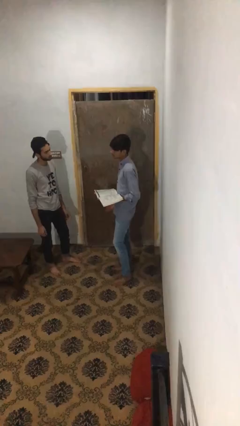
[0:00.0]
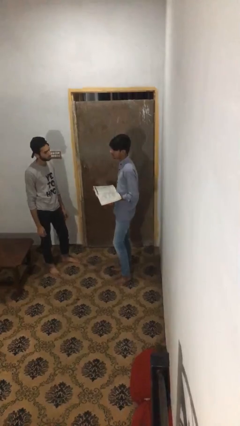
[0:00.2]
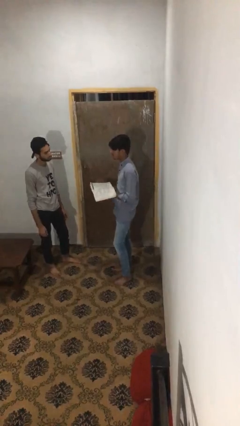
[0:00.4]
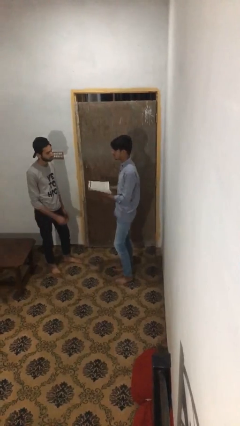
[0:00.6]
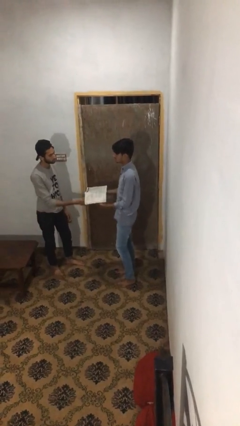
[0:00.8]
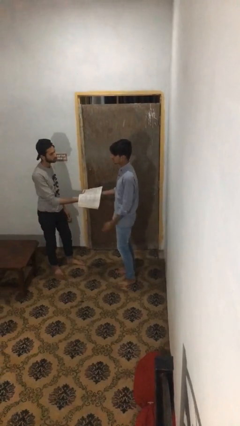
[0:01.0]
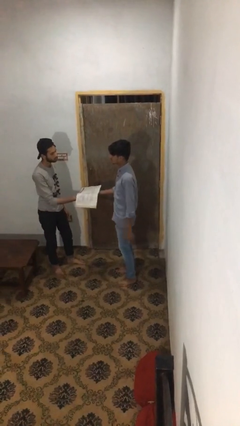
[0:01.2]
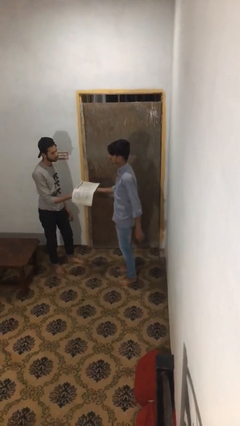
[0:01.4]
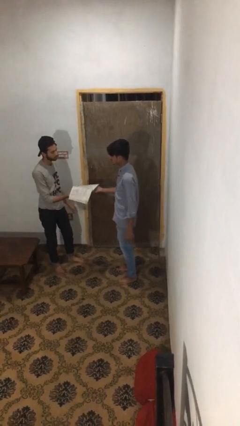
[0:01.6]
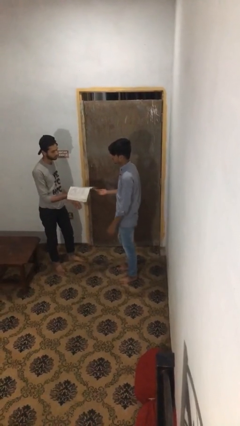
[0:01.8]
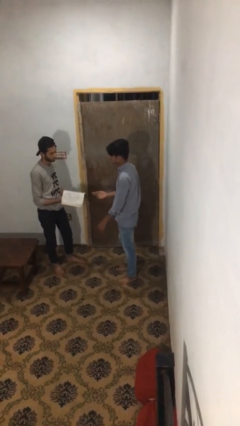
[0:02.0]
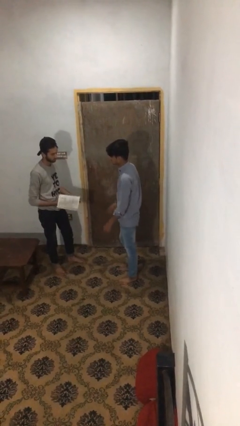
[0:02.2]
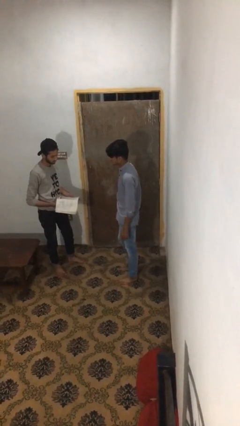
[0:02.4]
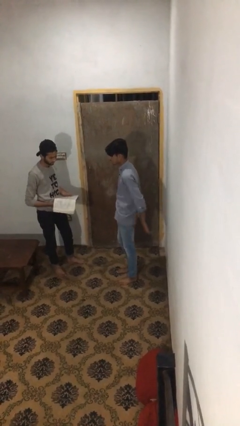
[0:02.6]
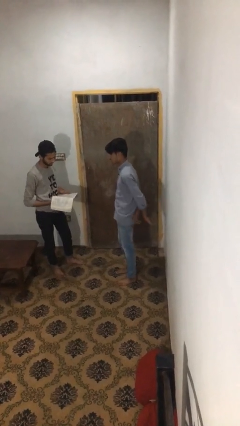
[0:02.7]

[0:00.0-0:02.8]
person transfers object to person

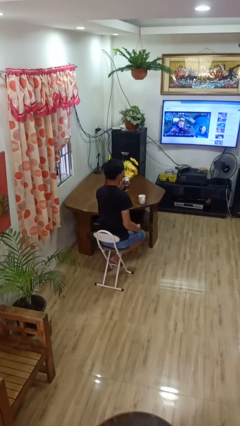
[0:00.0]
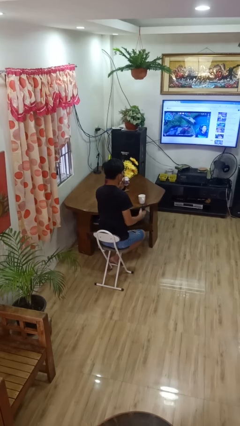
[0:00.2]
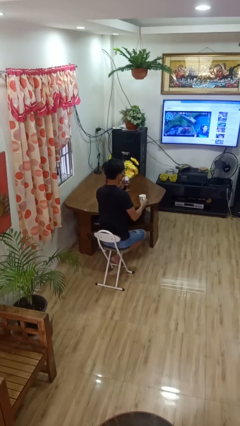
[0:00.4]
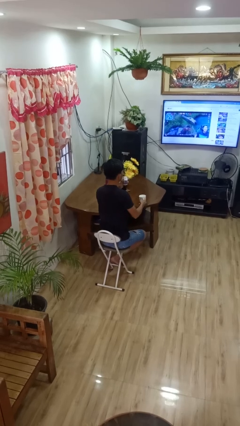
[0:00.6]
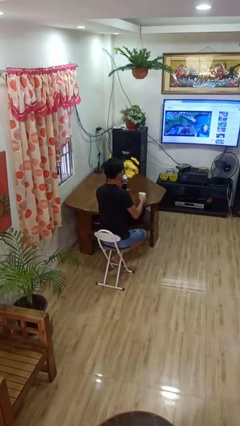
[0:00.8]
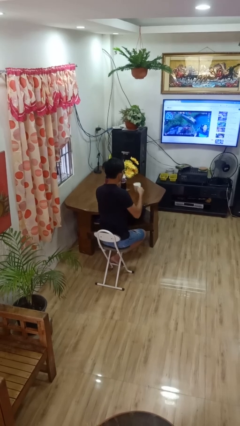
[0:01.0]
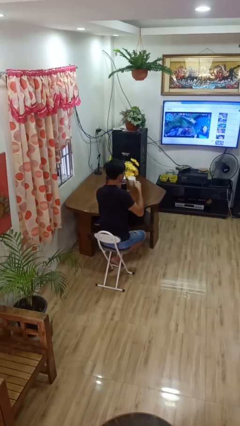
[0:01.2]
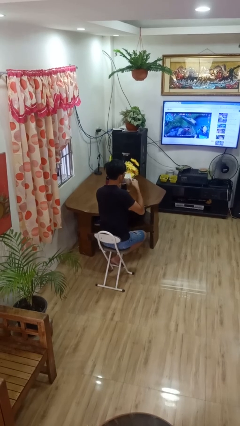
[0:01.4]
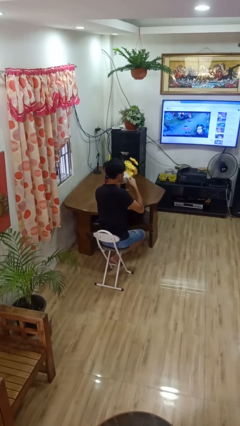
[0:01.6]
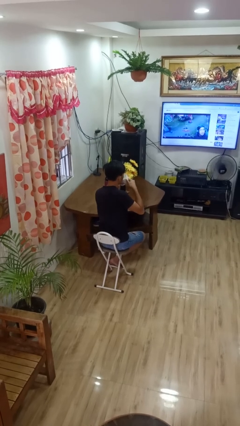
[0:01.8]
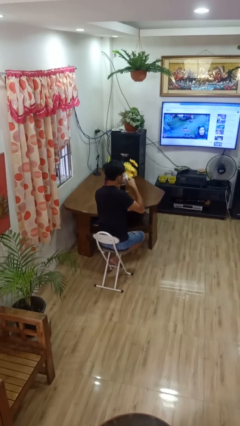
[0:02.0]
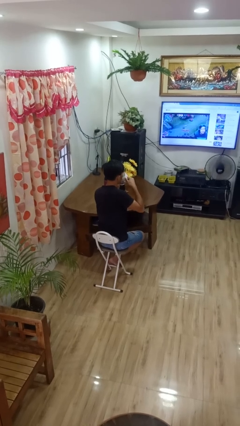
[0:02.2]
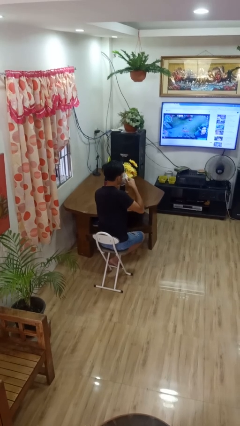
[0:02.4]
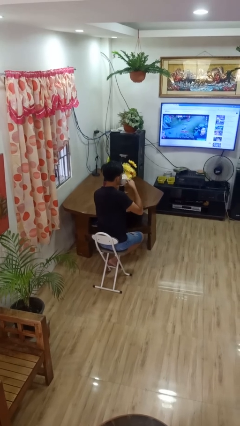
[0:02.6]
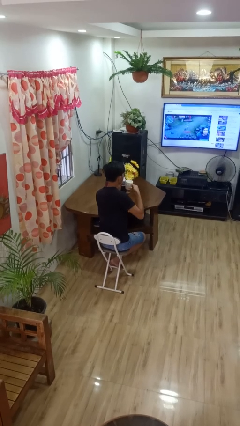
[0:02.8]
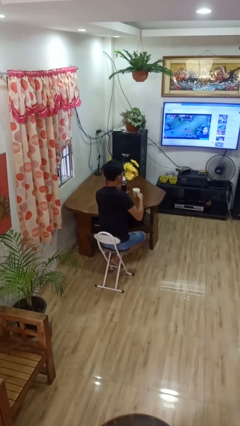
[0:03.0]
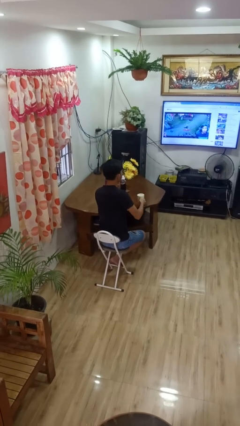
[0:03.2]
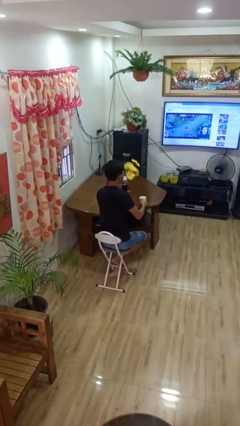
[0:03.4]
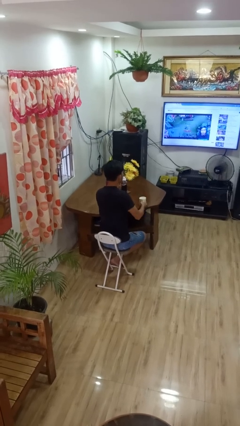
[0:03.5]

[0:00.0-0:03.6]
person drinks from cup

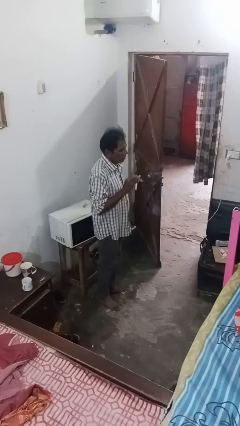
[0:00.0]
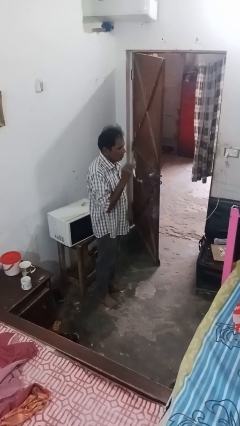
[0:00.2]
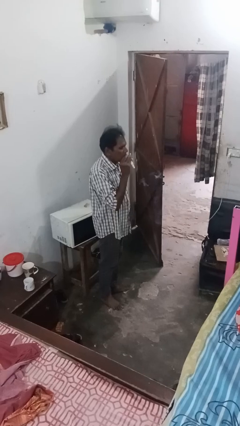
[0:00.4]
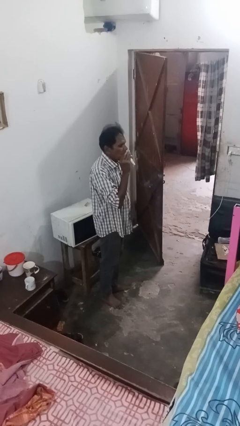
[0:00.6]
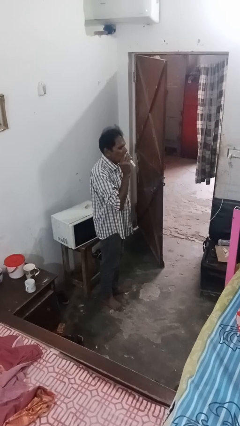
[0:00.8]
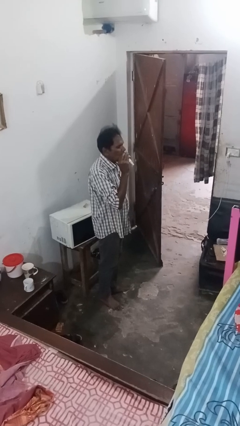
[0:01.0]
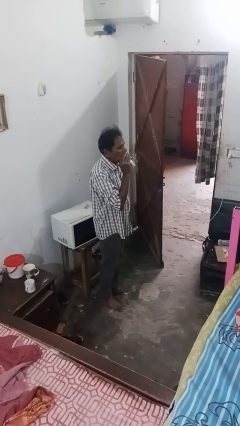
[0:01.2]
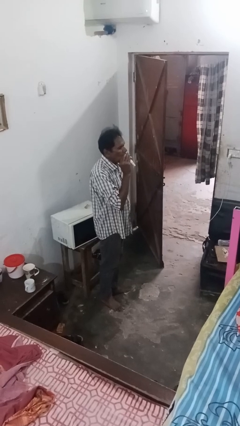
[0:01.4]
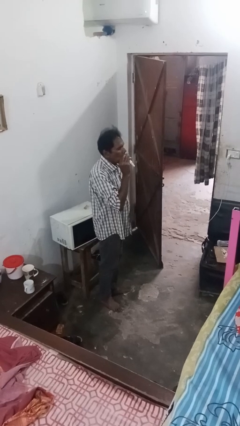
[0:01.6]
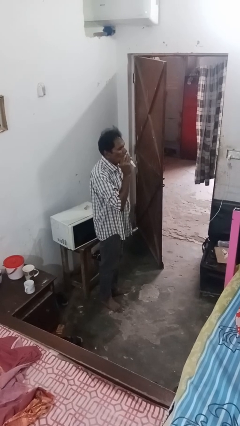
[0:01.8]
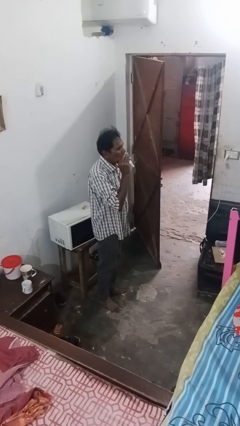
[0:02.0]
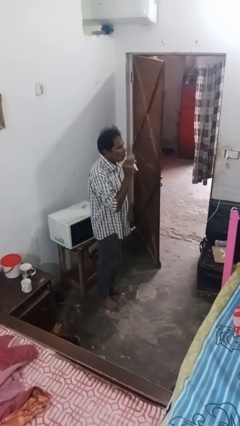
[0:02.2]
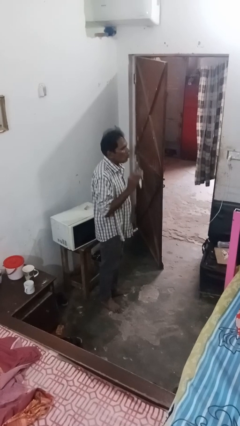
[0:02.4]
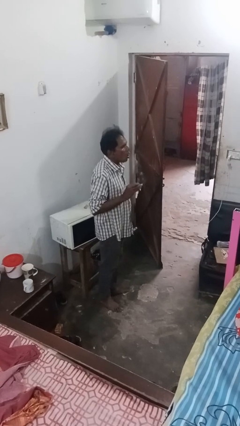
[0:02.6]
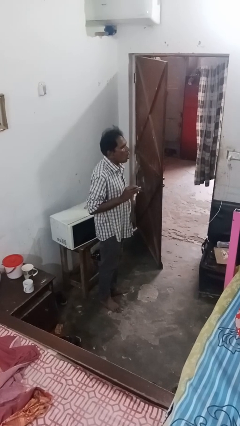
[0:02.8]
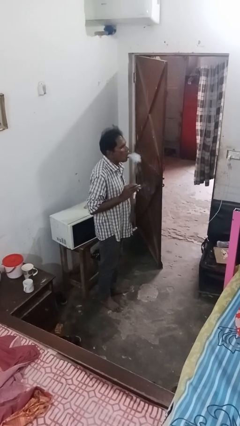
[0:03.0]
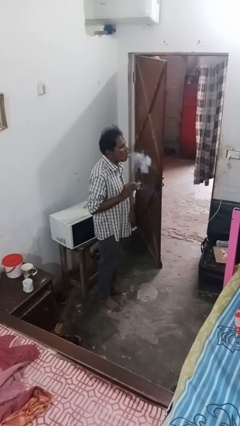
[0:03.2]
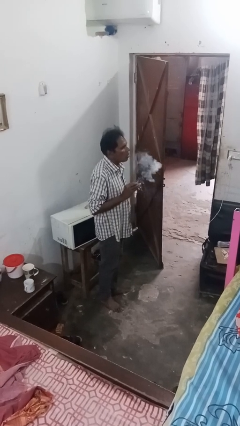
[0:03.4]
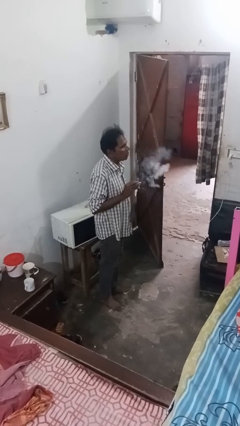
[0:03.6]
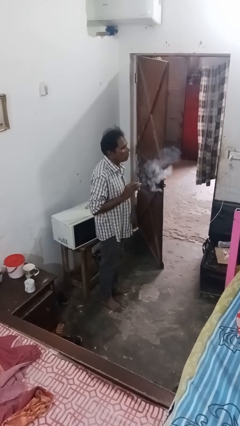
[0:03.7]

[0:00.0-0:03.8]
person vapes

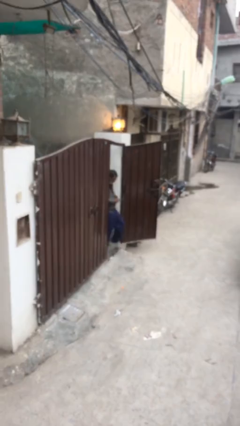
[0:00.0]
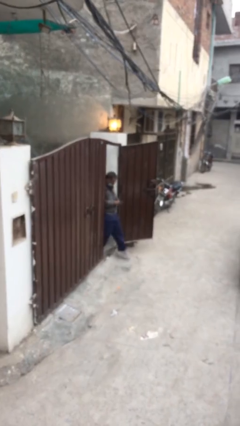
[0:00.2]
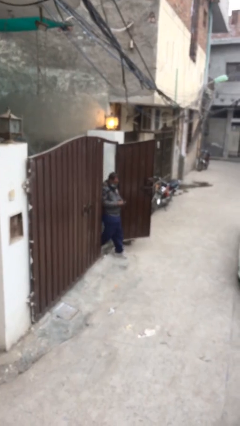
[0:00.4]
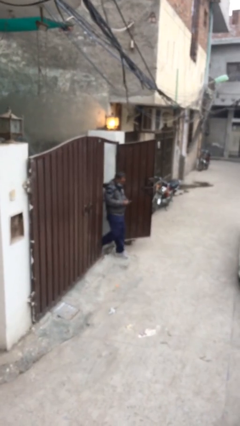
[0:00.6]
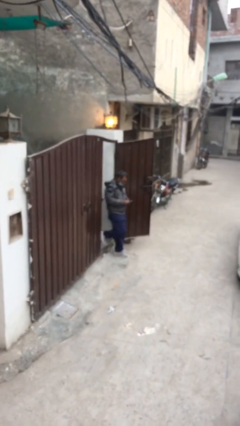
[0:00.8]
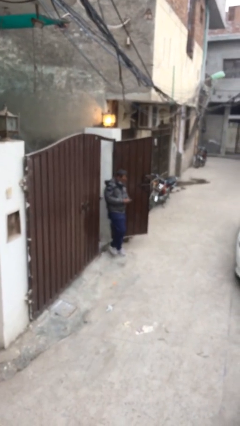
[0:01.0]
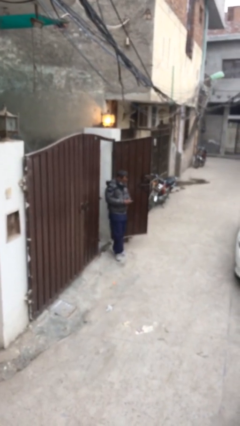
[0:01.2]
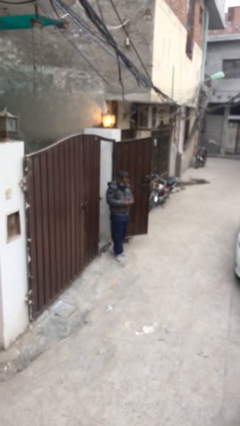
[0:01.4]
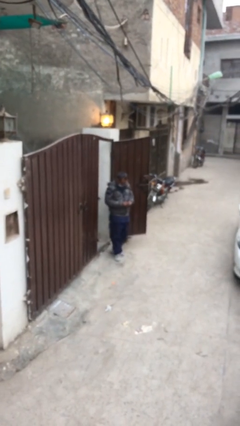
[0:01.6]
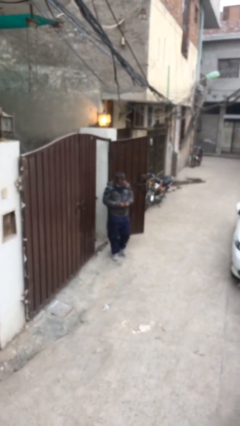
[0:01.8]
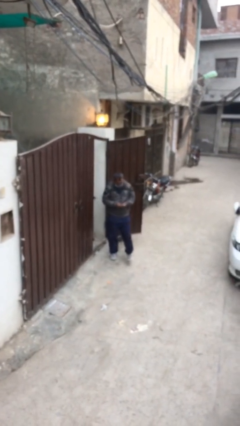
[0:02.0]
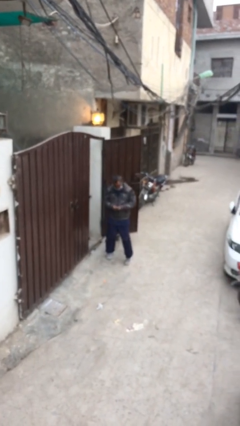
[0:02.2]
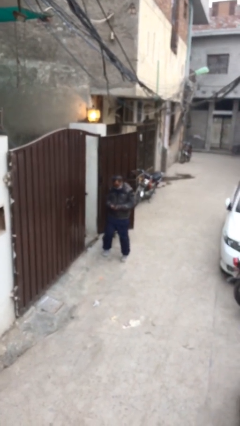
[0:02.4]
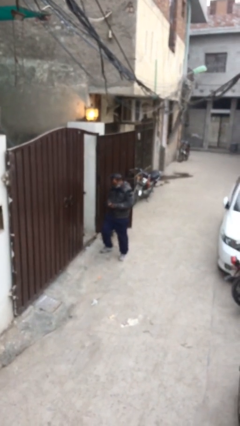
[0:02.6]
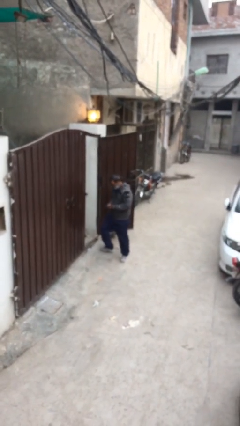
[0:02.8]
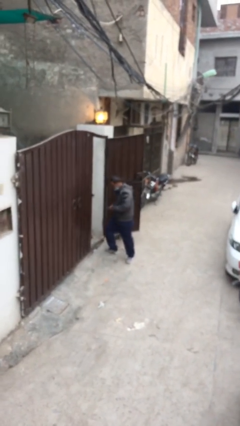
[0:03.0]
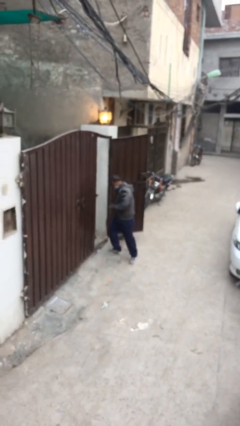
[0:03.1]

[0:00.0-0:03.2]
person enters scene through structure

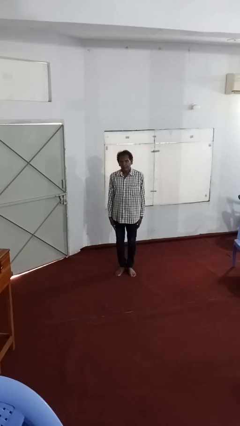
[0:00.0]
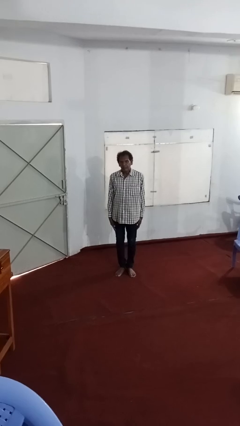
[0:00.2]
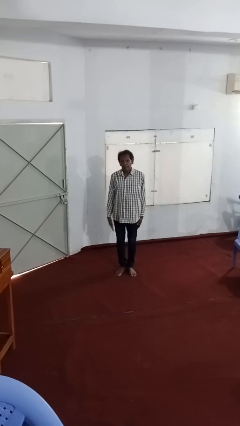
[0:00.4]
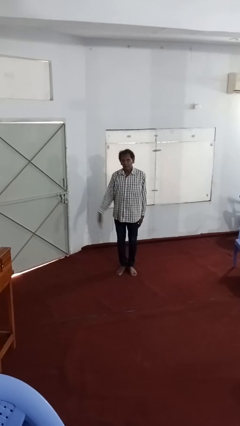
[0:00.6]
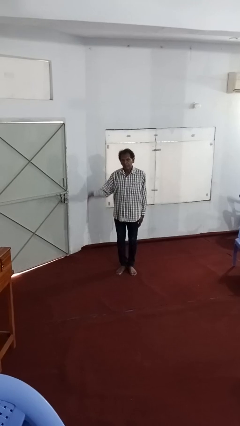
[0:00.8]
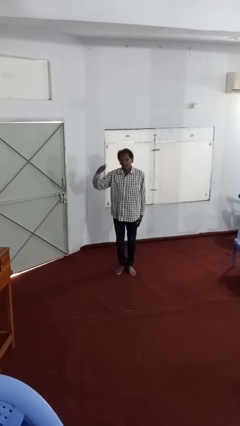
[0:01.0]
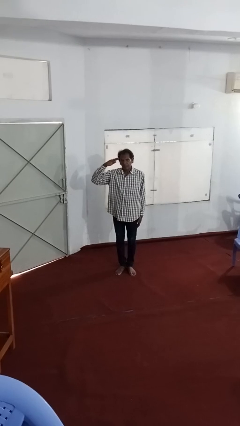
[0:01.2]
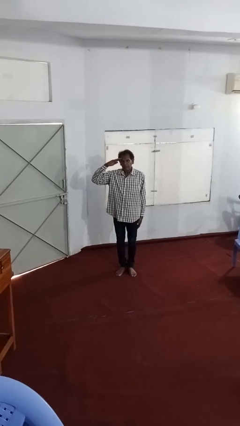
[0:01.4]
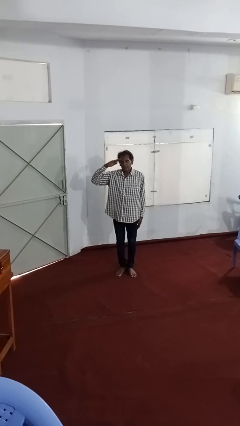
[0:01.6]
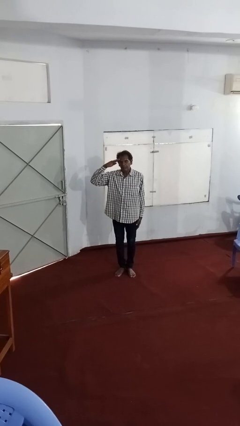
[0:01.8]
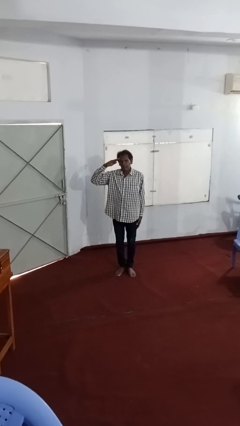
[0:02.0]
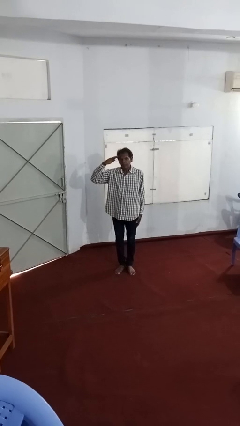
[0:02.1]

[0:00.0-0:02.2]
person salutes

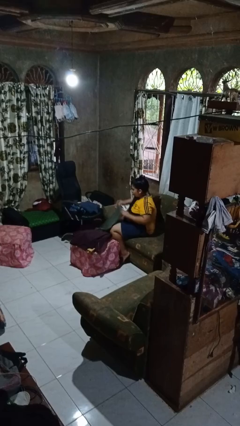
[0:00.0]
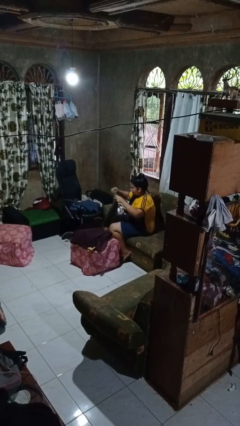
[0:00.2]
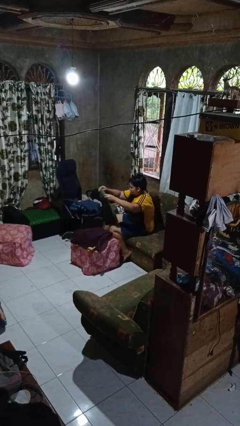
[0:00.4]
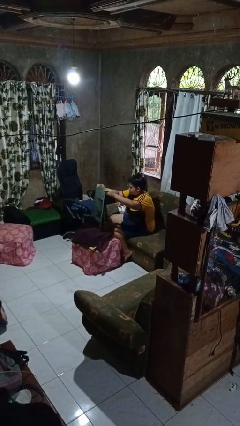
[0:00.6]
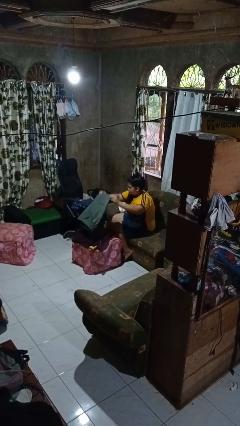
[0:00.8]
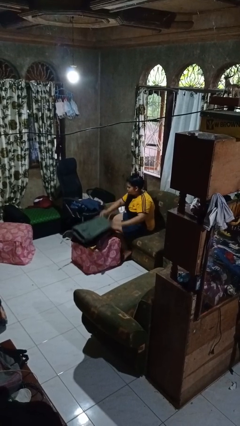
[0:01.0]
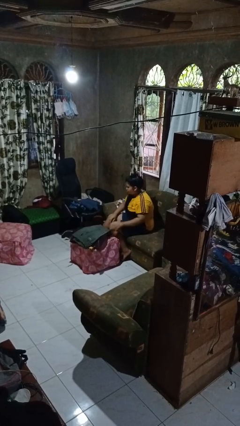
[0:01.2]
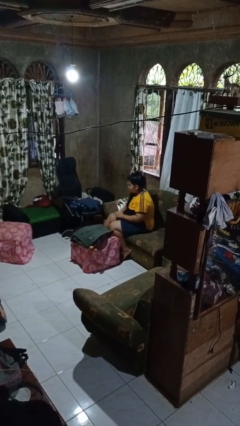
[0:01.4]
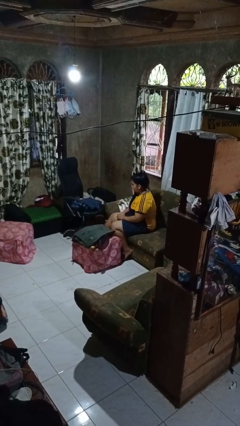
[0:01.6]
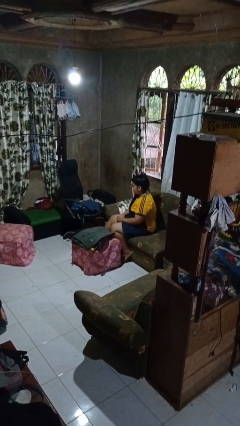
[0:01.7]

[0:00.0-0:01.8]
person folds pants
